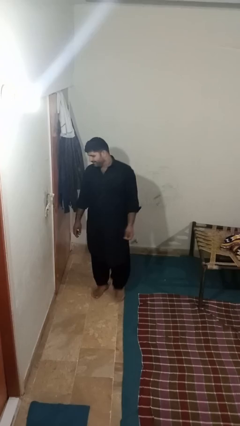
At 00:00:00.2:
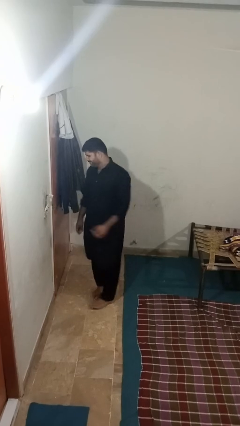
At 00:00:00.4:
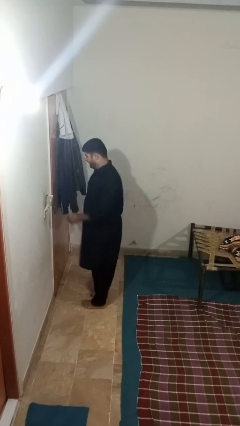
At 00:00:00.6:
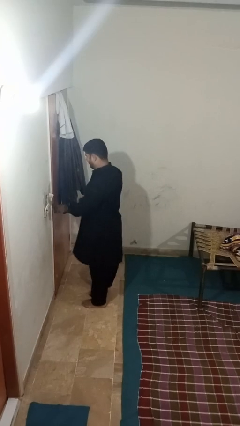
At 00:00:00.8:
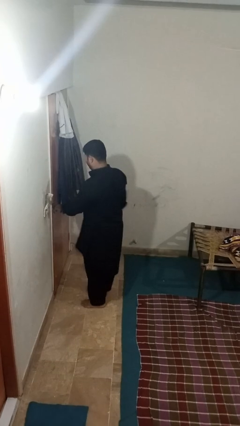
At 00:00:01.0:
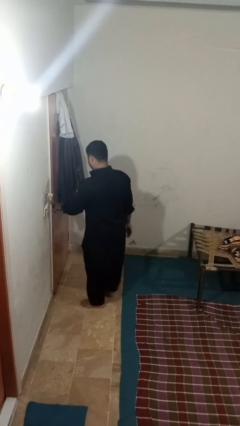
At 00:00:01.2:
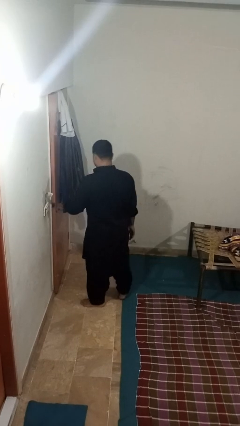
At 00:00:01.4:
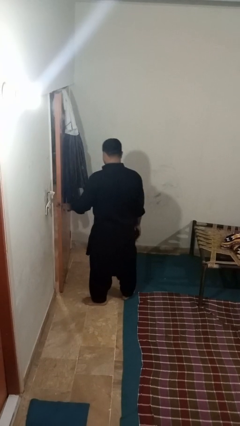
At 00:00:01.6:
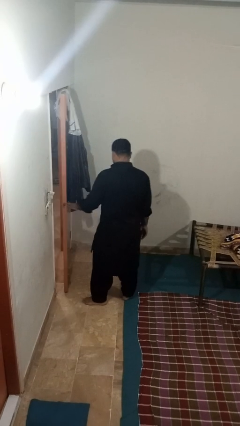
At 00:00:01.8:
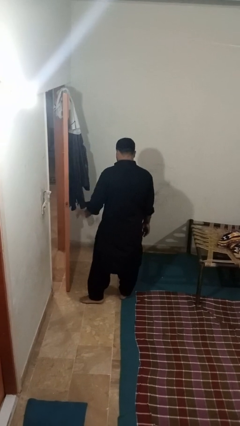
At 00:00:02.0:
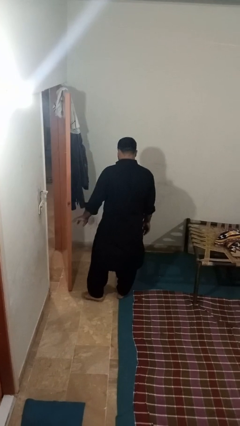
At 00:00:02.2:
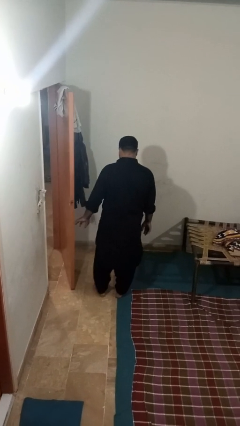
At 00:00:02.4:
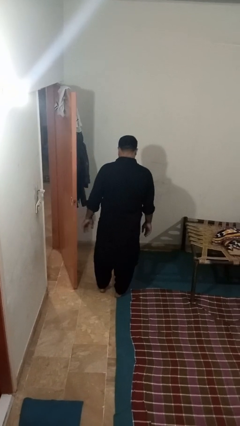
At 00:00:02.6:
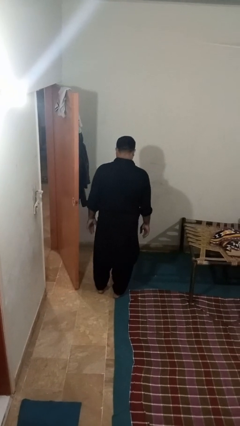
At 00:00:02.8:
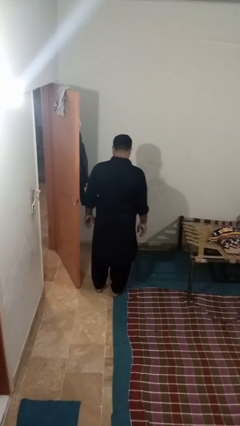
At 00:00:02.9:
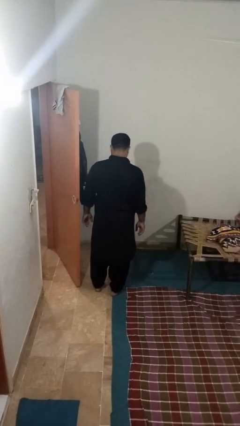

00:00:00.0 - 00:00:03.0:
person opens facility door

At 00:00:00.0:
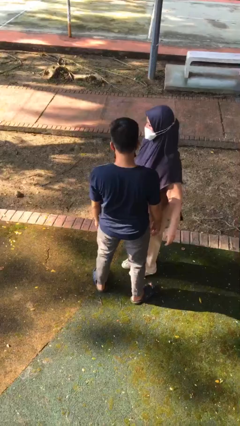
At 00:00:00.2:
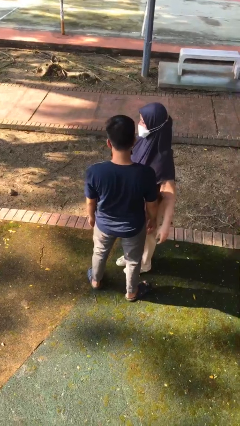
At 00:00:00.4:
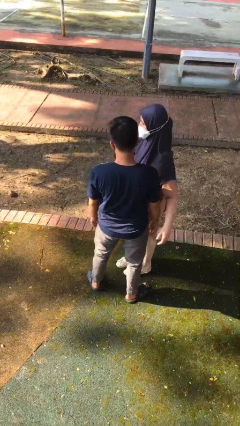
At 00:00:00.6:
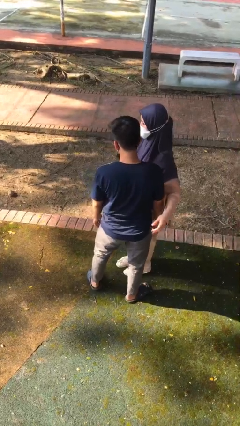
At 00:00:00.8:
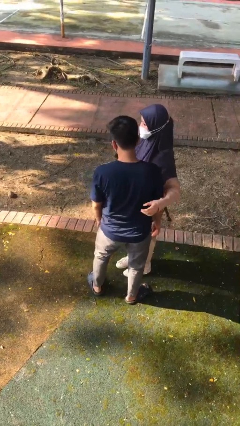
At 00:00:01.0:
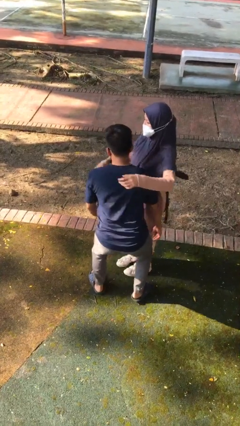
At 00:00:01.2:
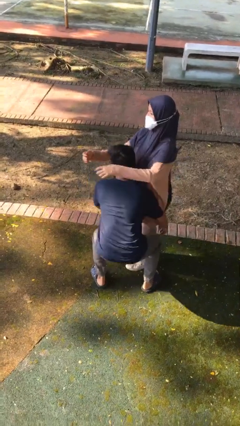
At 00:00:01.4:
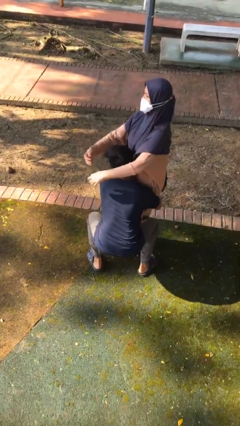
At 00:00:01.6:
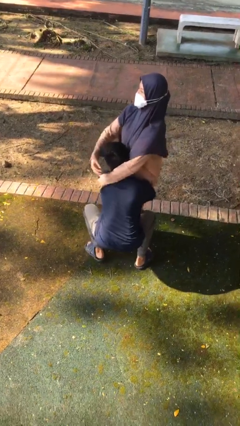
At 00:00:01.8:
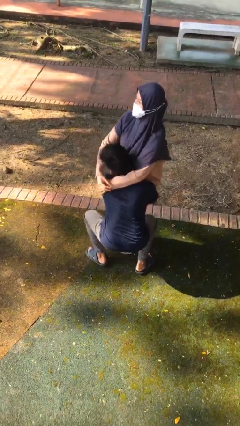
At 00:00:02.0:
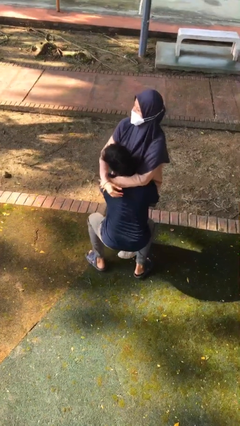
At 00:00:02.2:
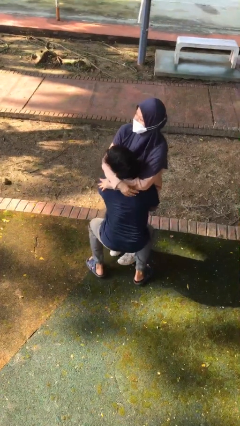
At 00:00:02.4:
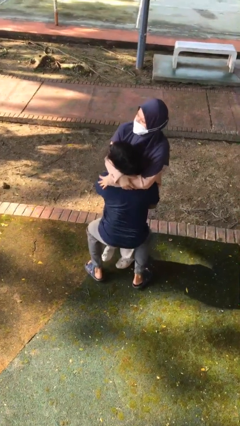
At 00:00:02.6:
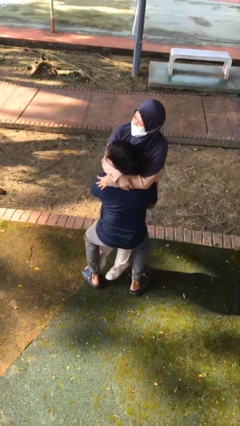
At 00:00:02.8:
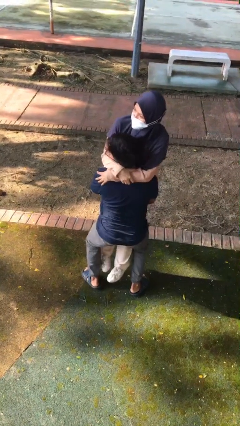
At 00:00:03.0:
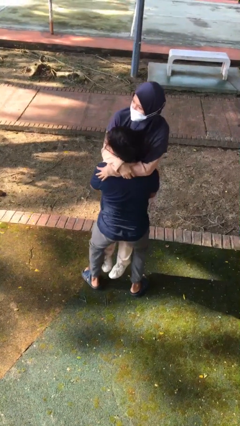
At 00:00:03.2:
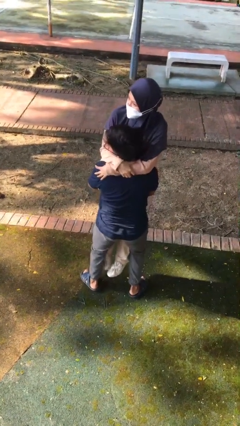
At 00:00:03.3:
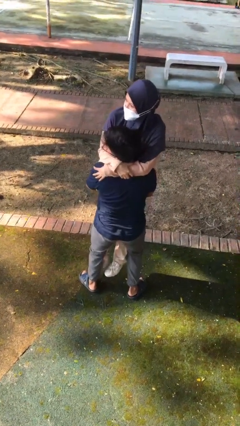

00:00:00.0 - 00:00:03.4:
person picks up person

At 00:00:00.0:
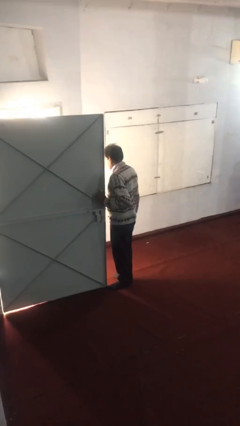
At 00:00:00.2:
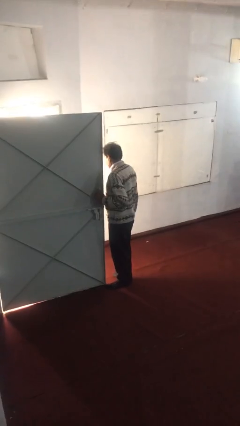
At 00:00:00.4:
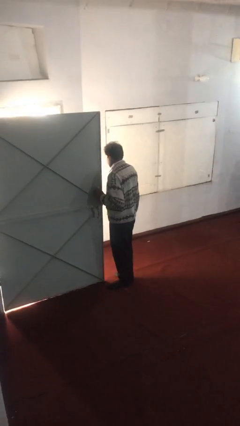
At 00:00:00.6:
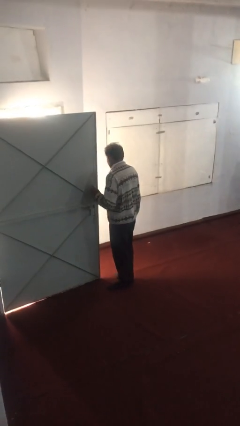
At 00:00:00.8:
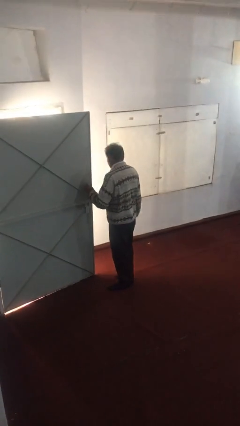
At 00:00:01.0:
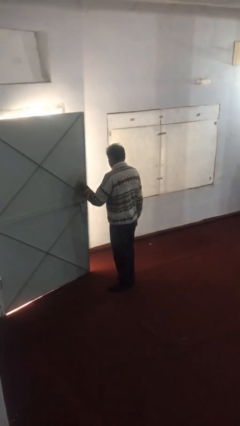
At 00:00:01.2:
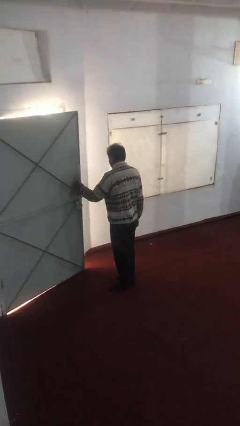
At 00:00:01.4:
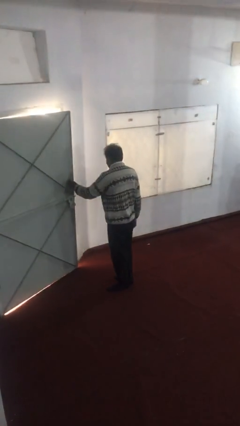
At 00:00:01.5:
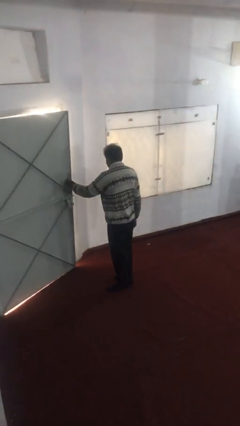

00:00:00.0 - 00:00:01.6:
person closes facility door

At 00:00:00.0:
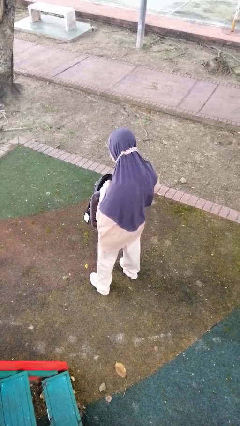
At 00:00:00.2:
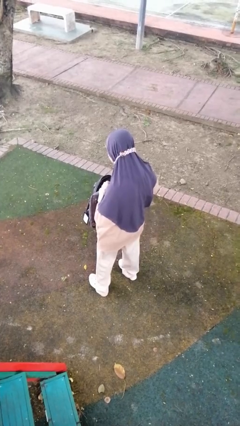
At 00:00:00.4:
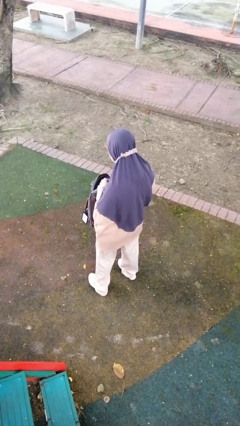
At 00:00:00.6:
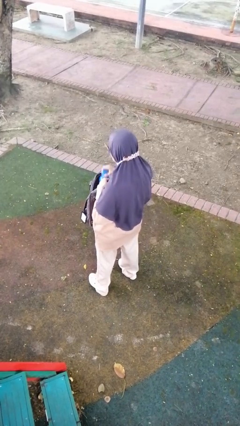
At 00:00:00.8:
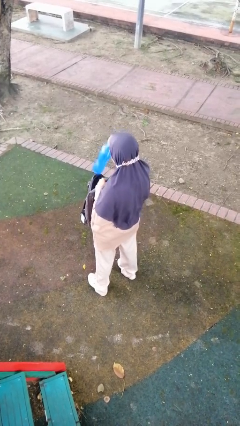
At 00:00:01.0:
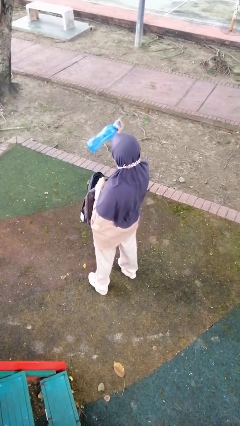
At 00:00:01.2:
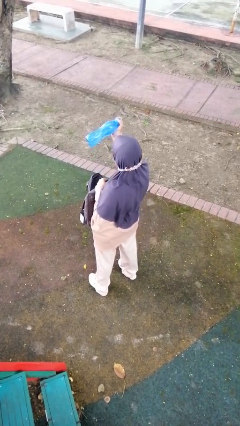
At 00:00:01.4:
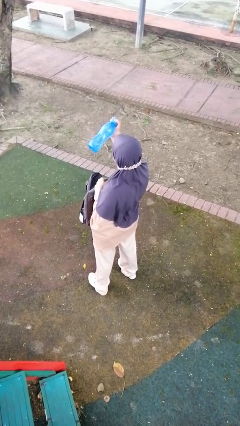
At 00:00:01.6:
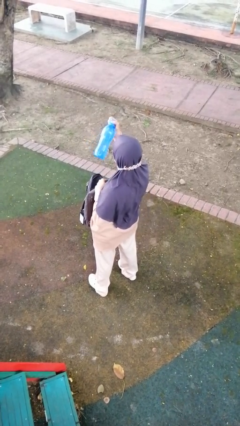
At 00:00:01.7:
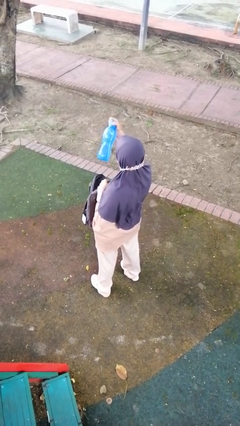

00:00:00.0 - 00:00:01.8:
person takes object from backpack

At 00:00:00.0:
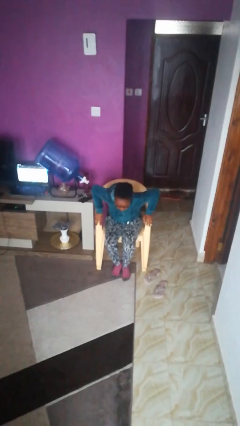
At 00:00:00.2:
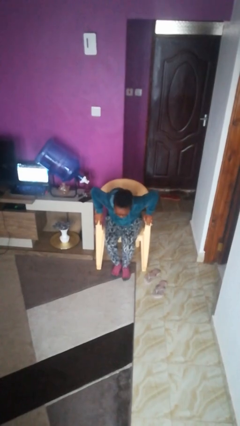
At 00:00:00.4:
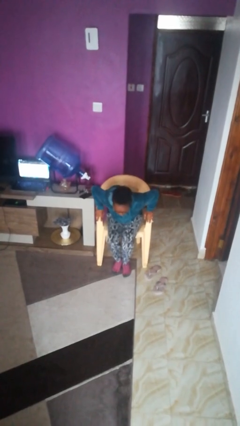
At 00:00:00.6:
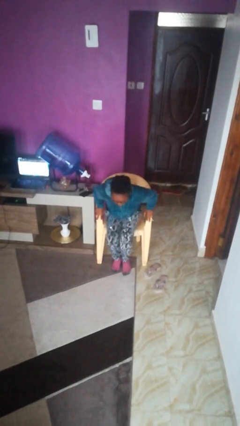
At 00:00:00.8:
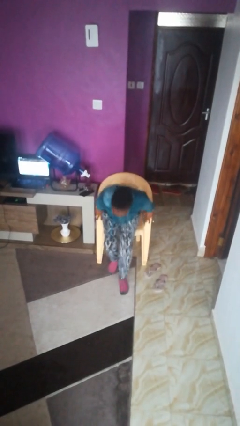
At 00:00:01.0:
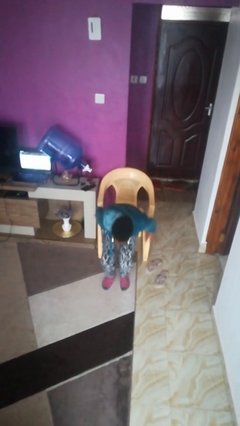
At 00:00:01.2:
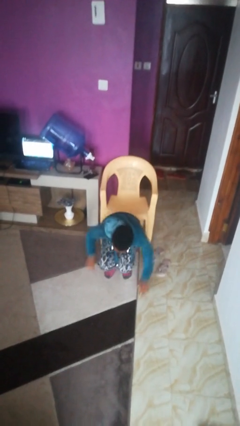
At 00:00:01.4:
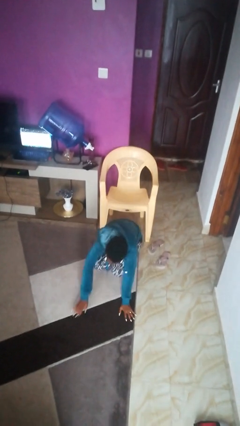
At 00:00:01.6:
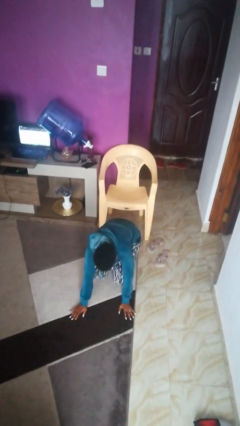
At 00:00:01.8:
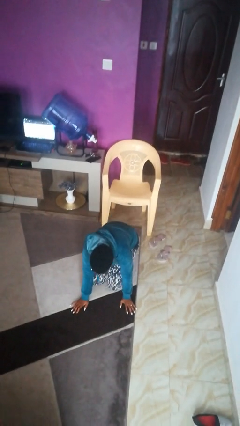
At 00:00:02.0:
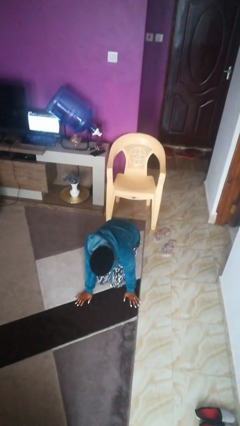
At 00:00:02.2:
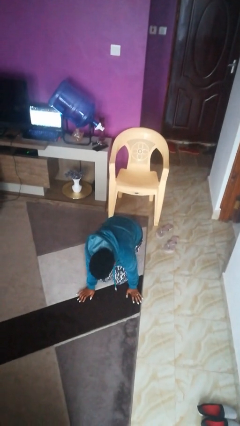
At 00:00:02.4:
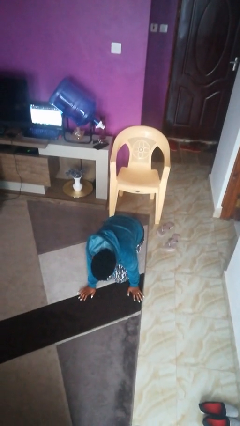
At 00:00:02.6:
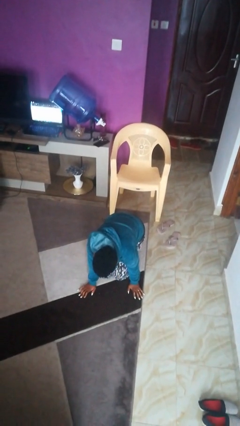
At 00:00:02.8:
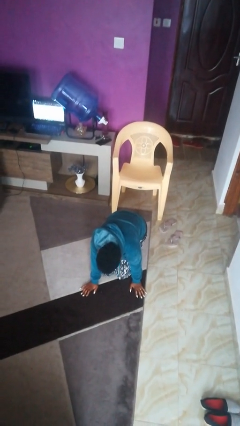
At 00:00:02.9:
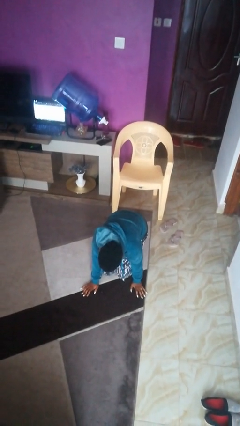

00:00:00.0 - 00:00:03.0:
person falls from chair

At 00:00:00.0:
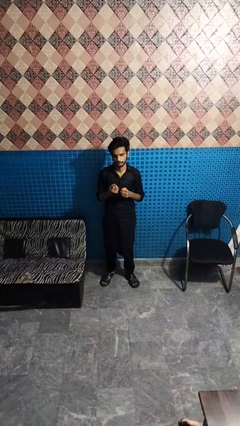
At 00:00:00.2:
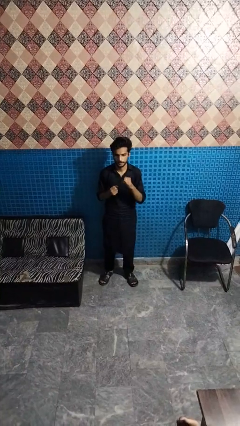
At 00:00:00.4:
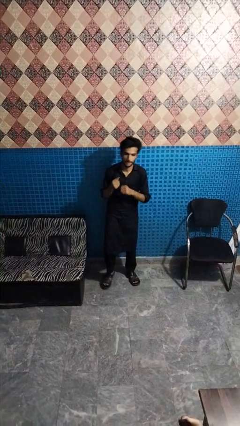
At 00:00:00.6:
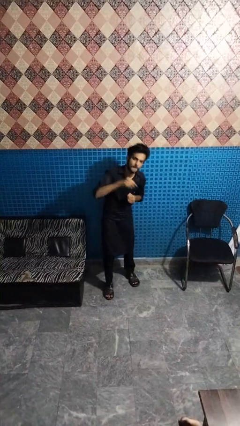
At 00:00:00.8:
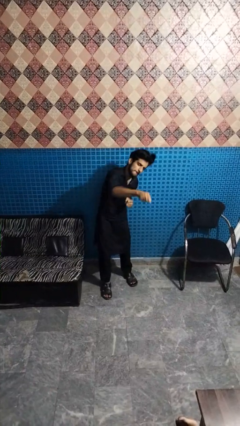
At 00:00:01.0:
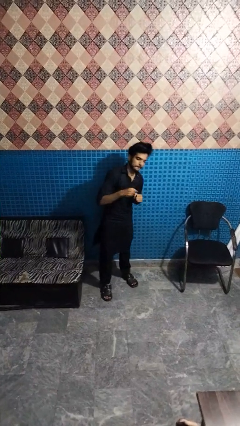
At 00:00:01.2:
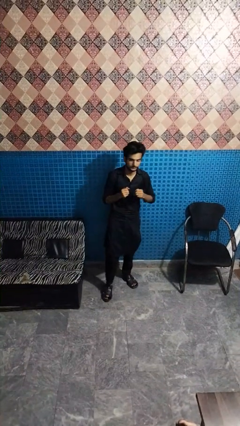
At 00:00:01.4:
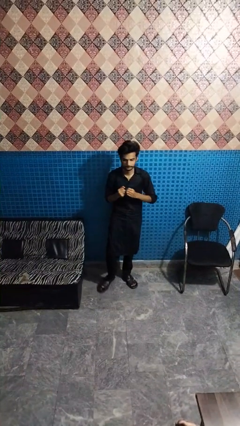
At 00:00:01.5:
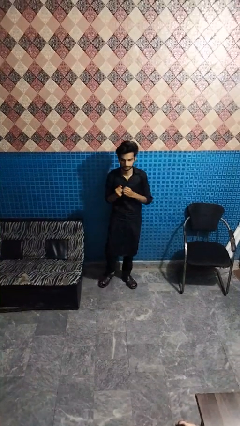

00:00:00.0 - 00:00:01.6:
person punches

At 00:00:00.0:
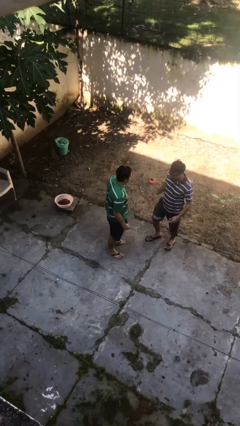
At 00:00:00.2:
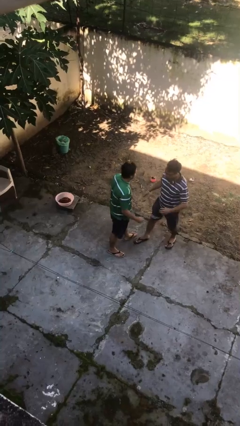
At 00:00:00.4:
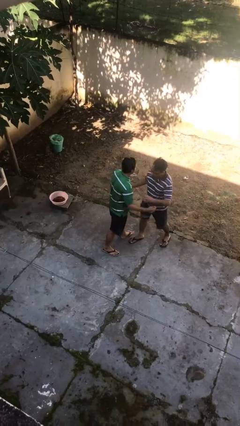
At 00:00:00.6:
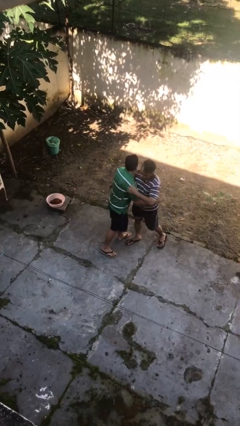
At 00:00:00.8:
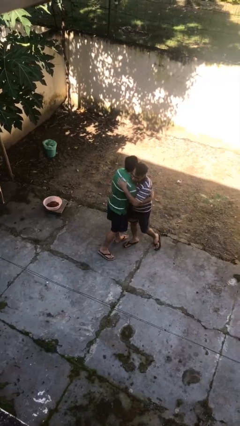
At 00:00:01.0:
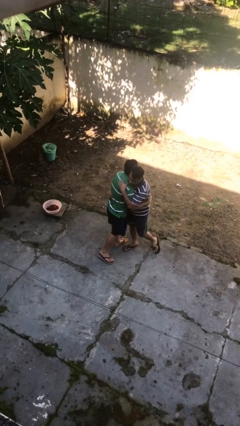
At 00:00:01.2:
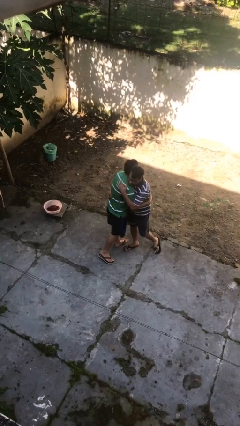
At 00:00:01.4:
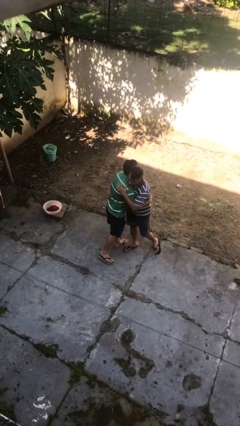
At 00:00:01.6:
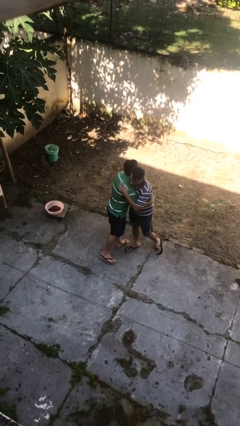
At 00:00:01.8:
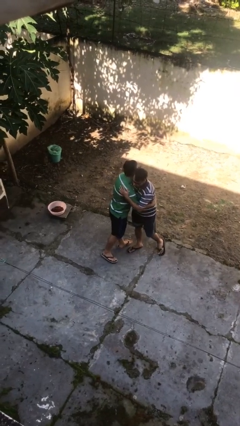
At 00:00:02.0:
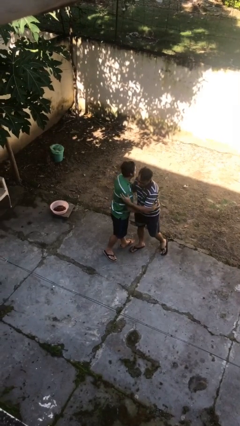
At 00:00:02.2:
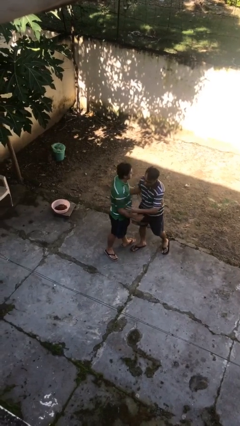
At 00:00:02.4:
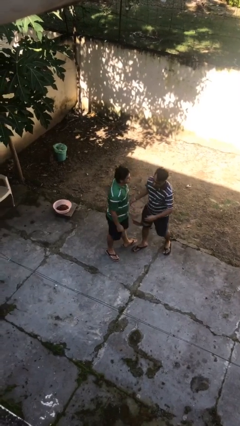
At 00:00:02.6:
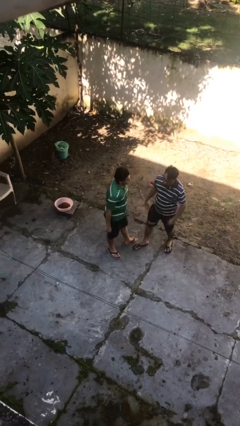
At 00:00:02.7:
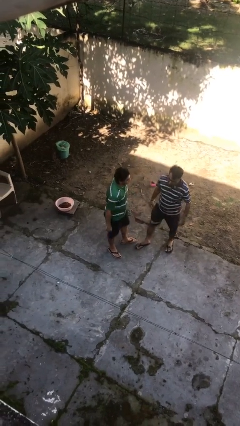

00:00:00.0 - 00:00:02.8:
person embraces person
